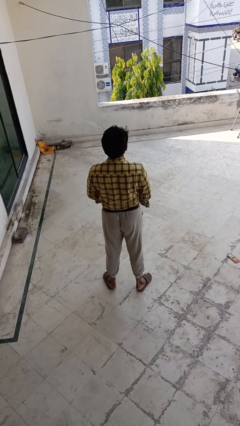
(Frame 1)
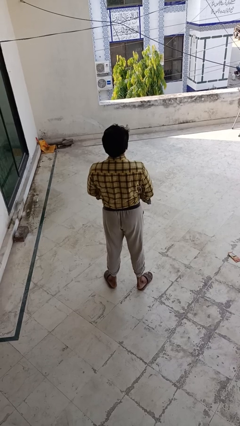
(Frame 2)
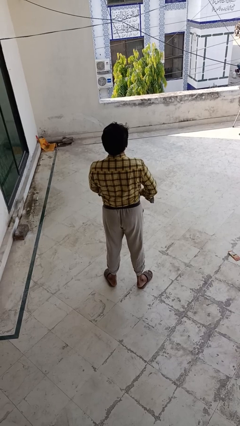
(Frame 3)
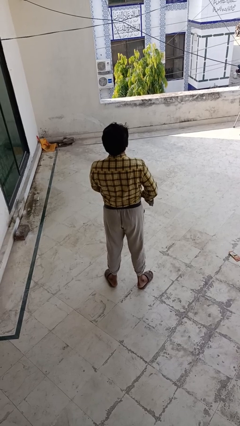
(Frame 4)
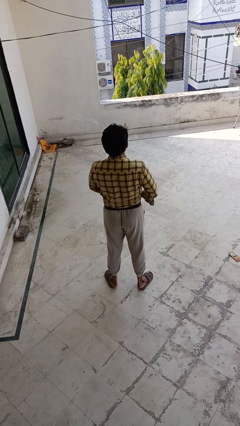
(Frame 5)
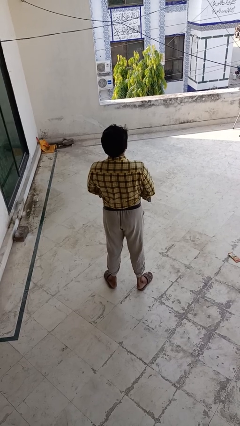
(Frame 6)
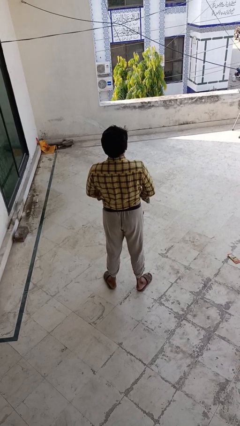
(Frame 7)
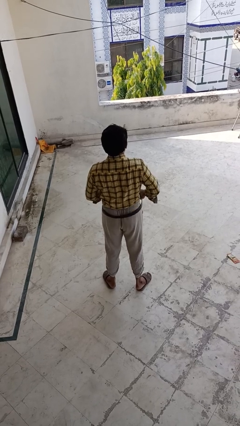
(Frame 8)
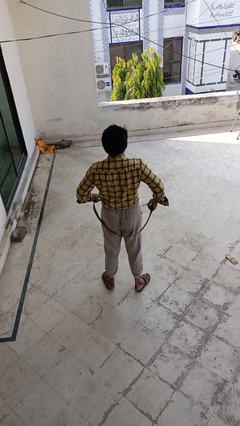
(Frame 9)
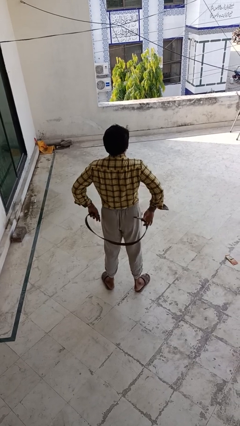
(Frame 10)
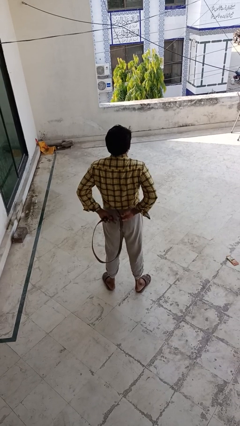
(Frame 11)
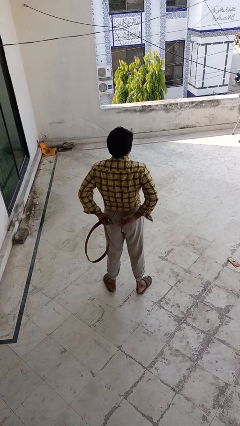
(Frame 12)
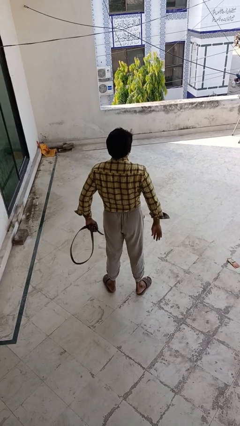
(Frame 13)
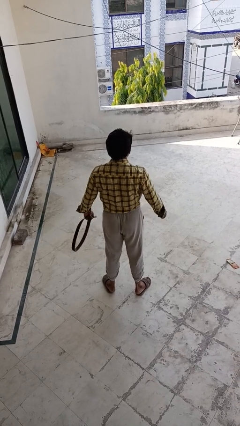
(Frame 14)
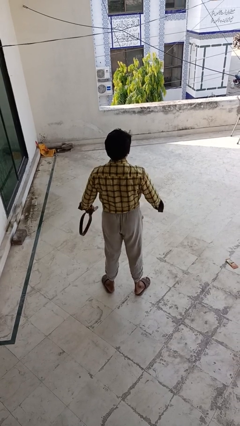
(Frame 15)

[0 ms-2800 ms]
person takes off belt

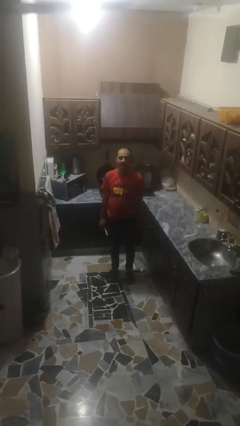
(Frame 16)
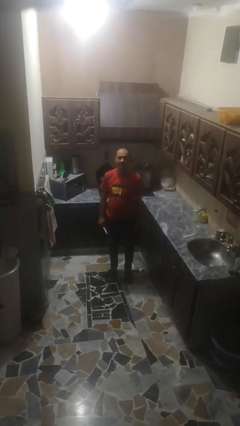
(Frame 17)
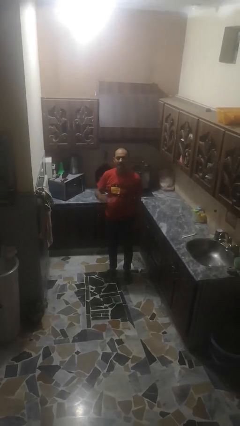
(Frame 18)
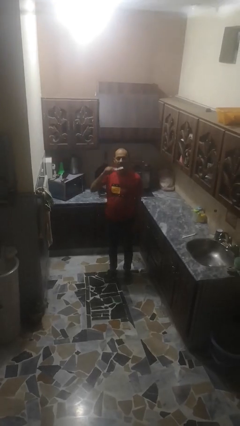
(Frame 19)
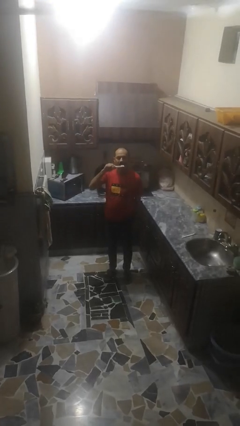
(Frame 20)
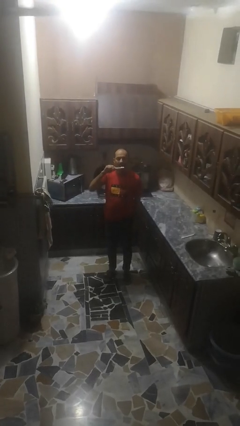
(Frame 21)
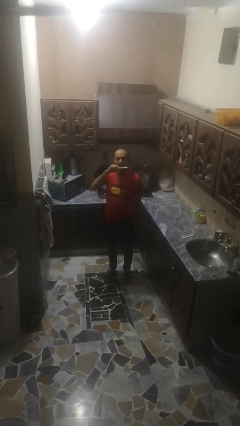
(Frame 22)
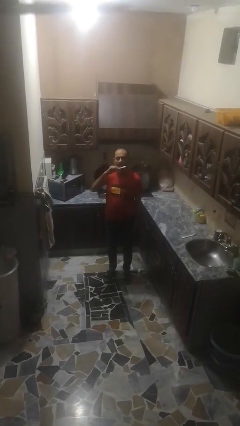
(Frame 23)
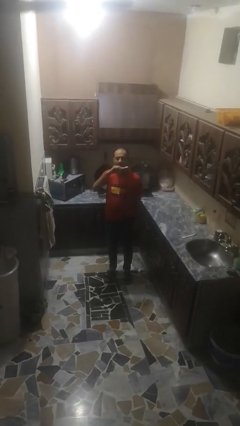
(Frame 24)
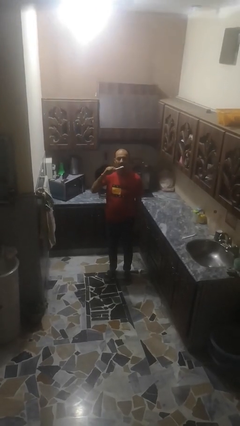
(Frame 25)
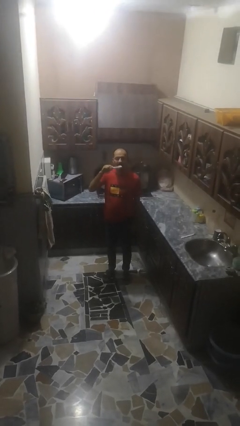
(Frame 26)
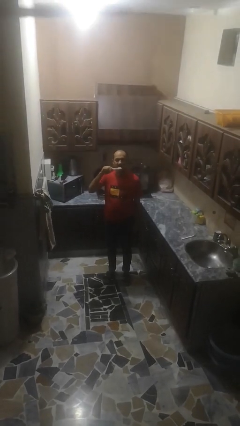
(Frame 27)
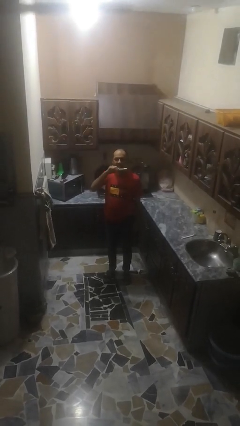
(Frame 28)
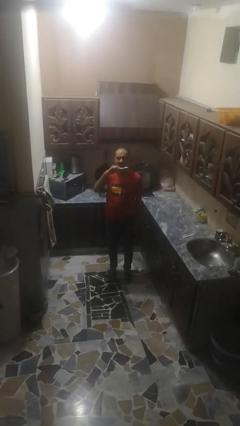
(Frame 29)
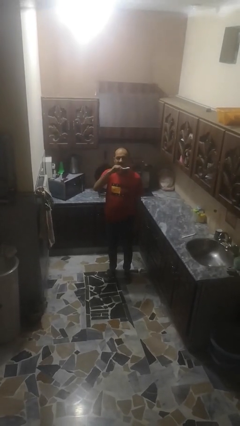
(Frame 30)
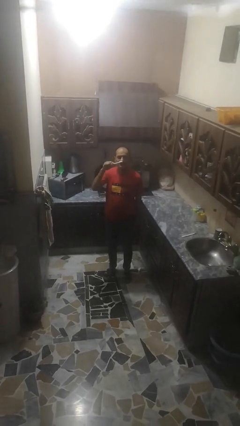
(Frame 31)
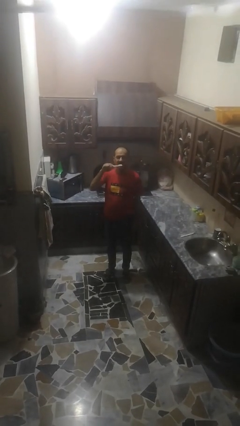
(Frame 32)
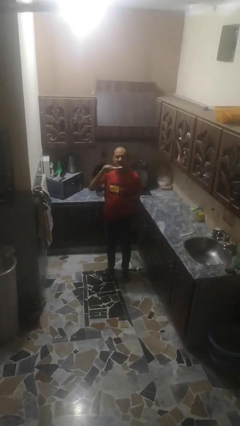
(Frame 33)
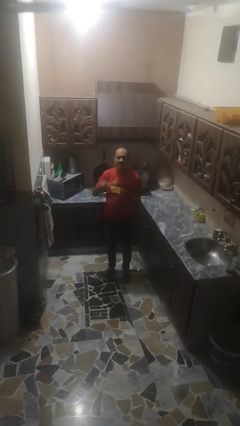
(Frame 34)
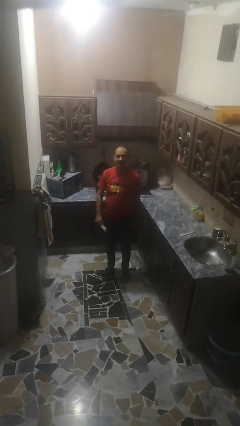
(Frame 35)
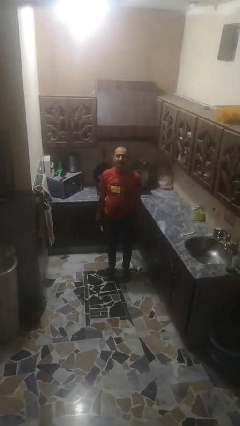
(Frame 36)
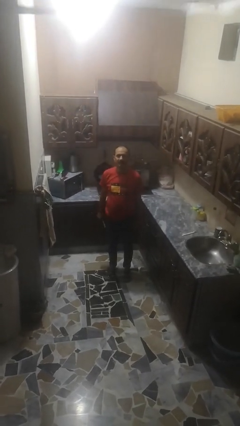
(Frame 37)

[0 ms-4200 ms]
person brushes teeth

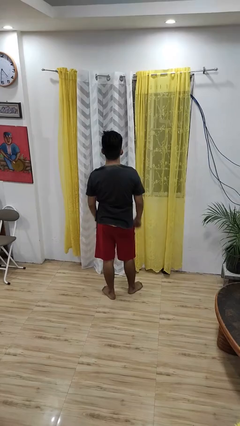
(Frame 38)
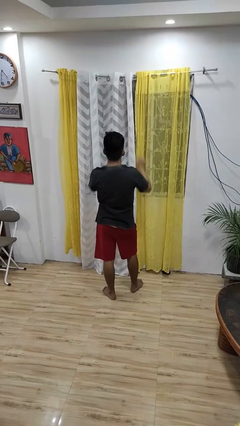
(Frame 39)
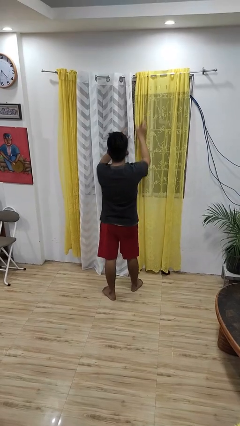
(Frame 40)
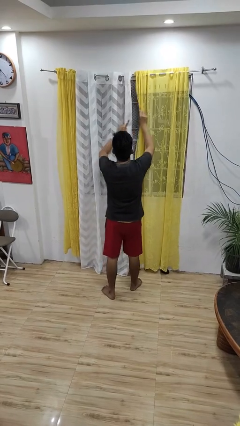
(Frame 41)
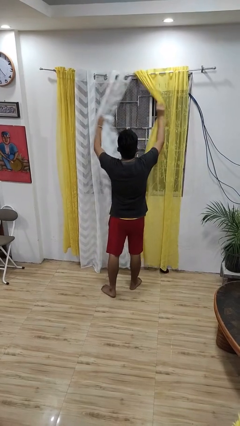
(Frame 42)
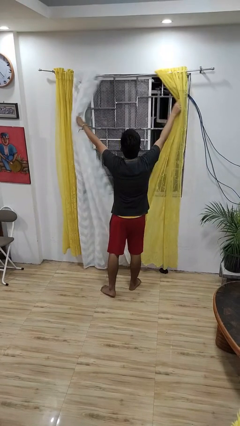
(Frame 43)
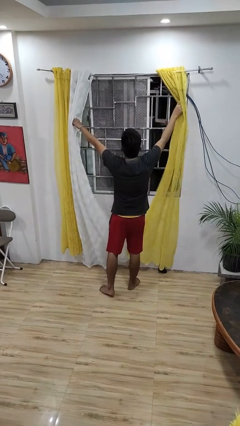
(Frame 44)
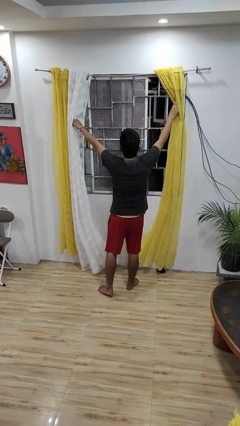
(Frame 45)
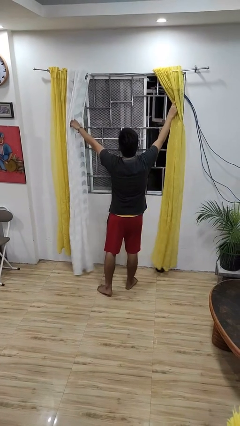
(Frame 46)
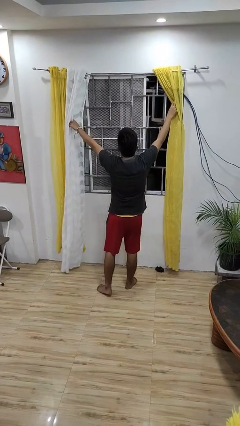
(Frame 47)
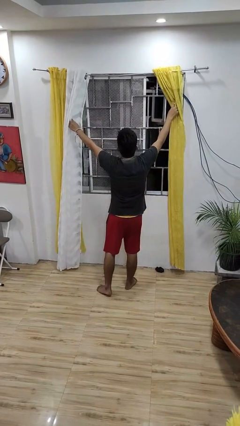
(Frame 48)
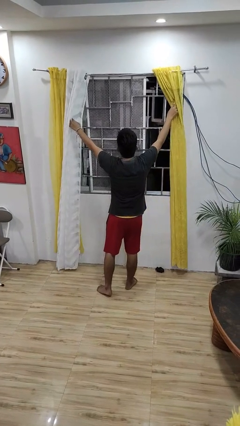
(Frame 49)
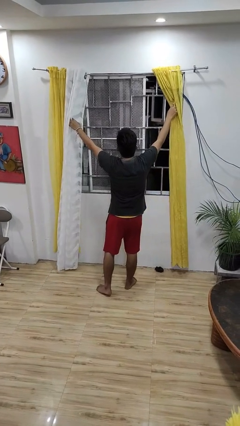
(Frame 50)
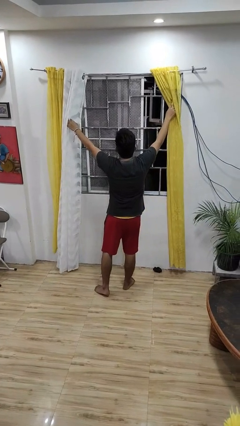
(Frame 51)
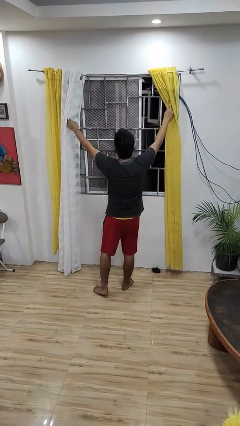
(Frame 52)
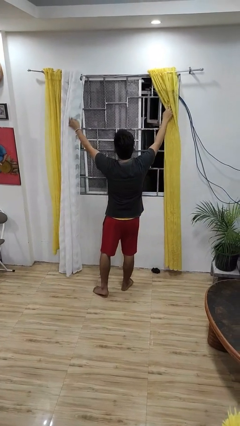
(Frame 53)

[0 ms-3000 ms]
person opens curtains

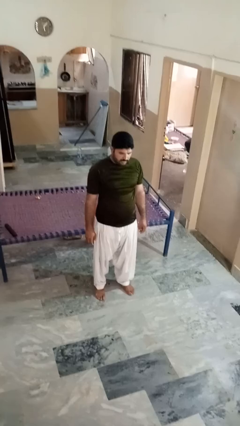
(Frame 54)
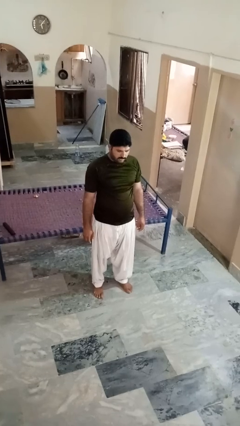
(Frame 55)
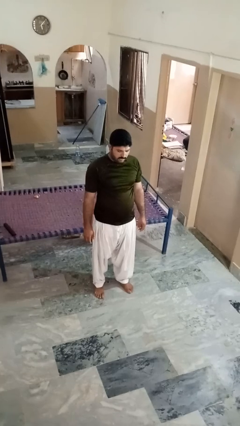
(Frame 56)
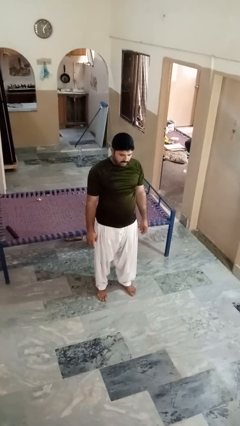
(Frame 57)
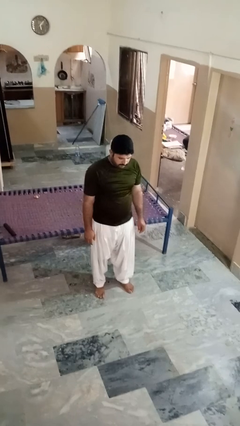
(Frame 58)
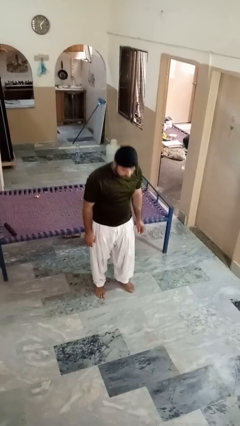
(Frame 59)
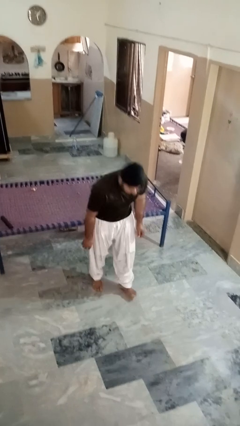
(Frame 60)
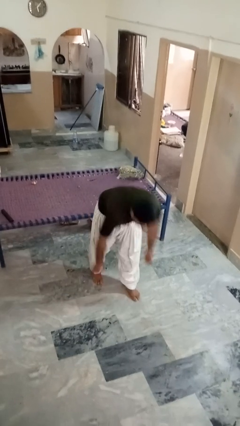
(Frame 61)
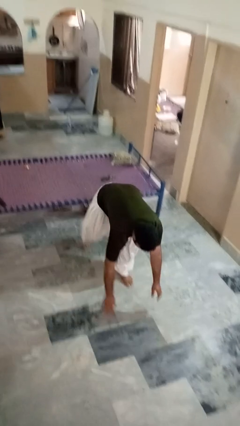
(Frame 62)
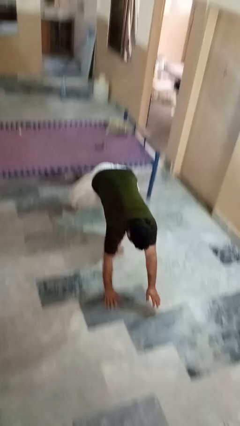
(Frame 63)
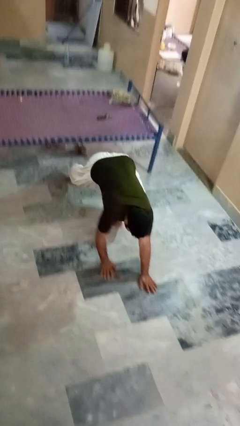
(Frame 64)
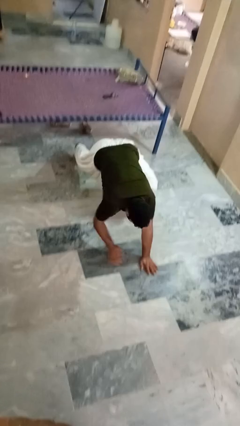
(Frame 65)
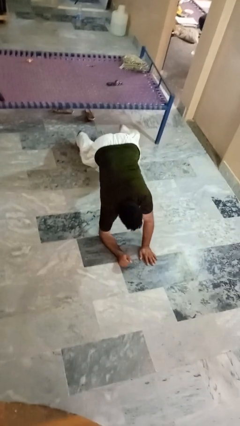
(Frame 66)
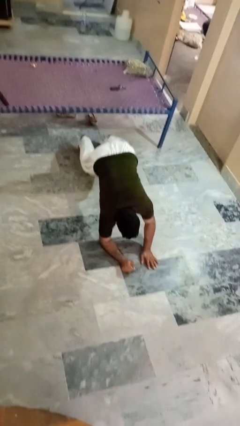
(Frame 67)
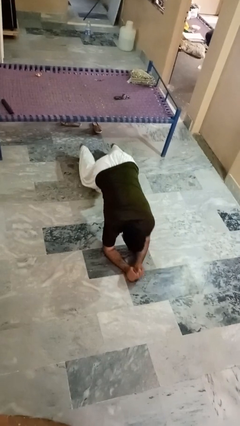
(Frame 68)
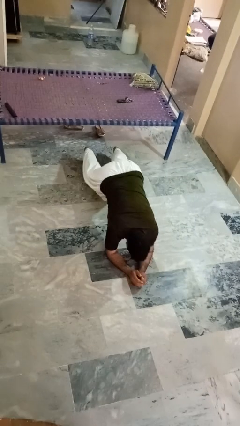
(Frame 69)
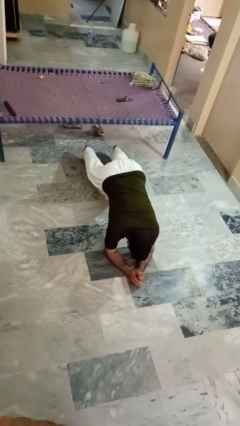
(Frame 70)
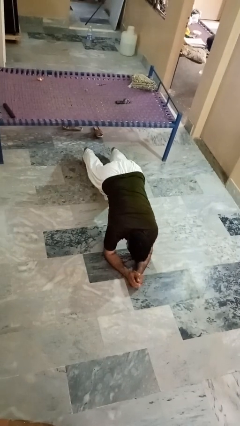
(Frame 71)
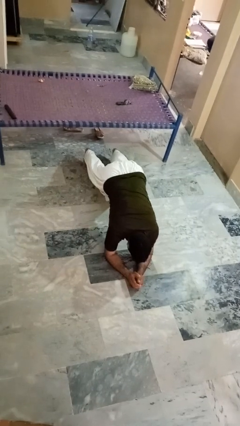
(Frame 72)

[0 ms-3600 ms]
person exercises with plank

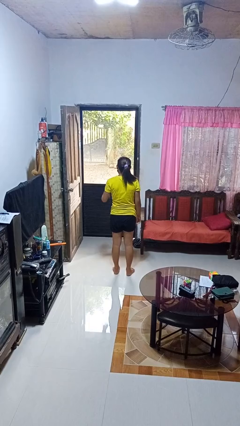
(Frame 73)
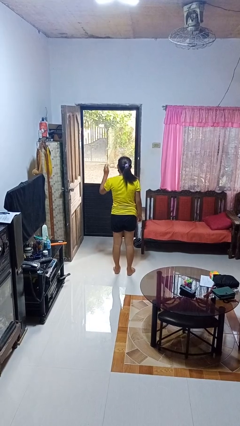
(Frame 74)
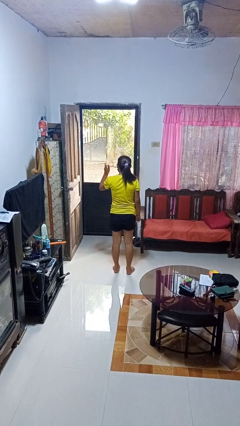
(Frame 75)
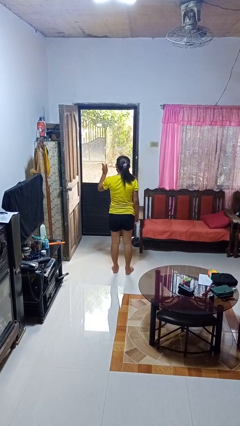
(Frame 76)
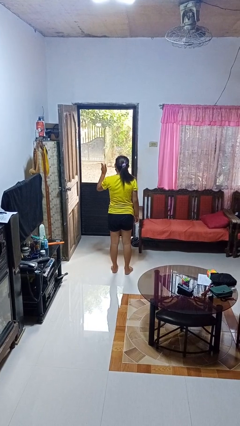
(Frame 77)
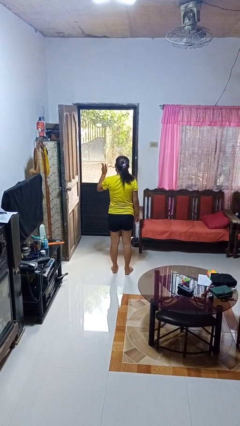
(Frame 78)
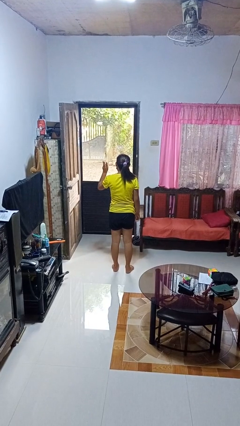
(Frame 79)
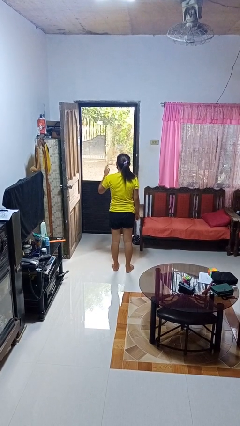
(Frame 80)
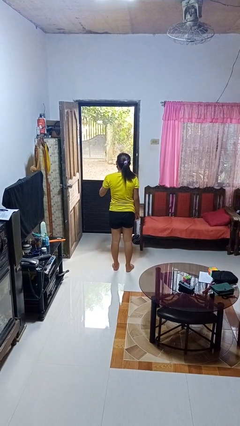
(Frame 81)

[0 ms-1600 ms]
person gestures number three

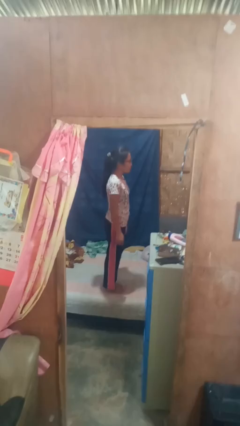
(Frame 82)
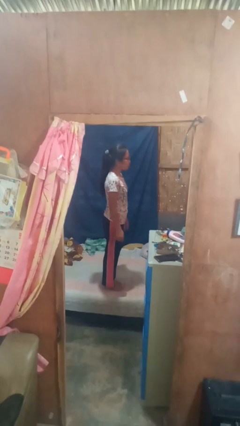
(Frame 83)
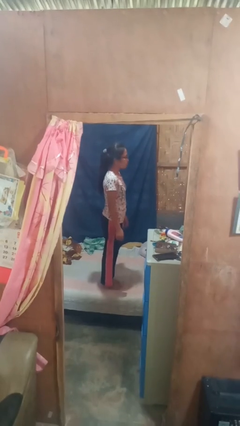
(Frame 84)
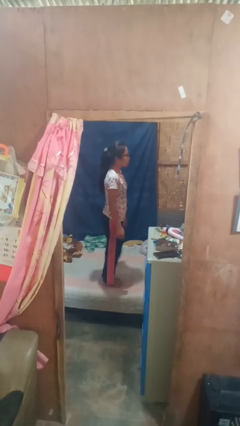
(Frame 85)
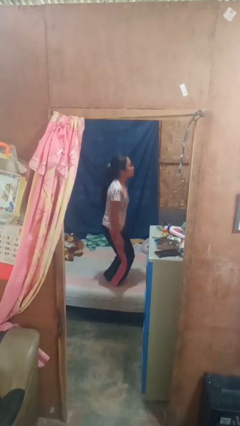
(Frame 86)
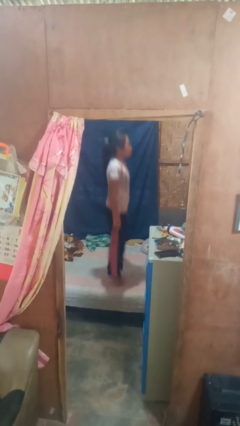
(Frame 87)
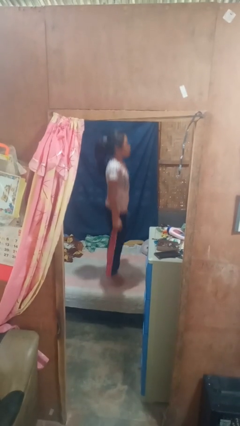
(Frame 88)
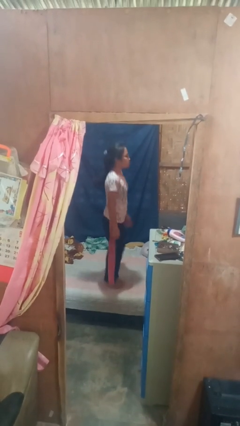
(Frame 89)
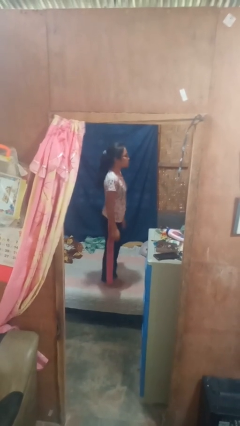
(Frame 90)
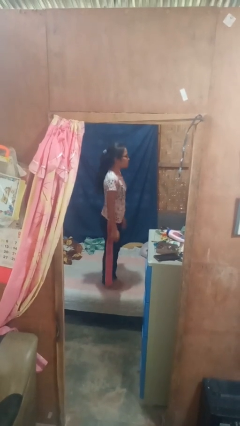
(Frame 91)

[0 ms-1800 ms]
person jumps on bed
